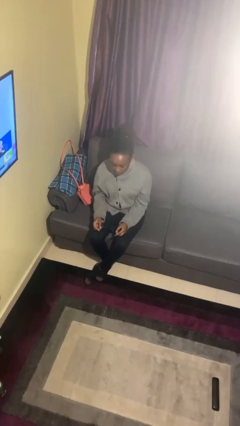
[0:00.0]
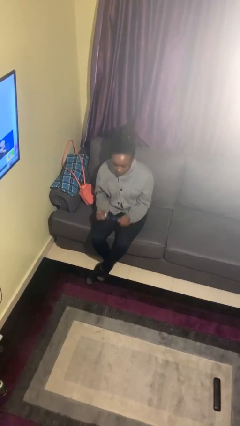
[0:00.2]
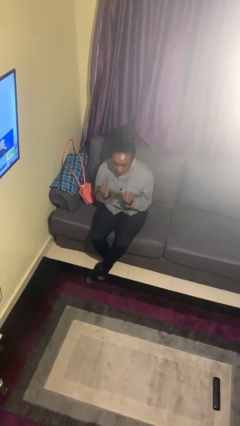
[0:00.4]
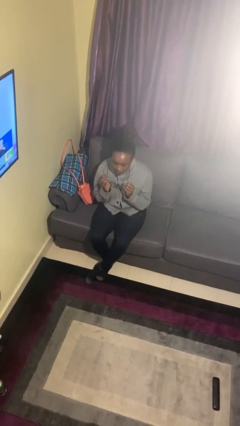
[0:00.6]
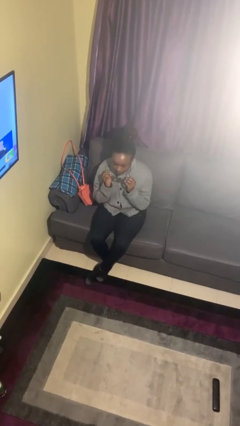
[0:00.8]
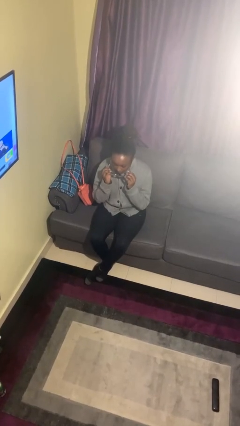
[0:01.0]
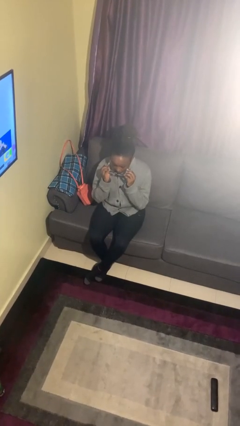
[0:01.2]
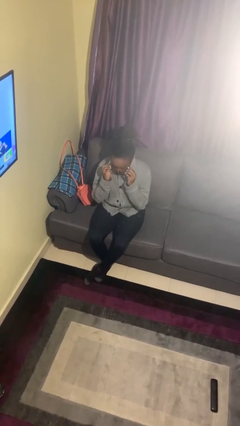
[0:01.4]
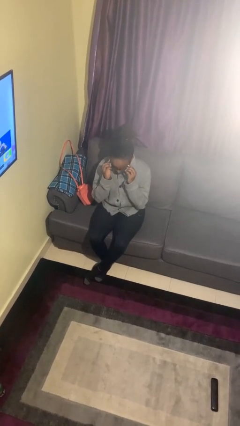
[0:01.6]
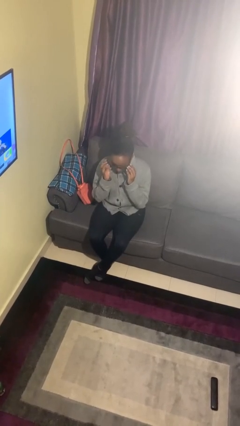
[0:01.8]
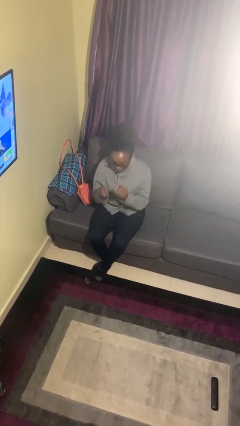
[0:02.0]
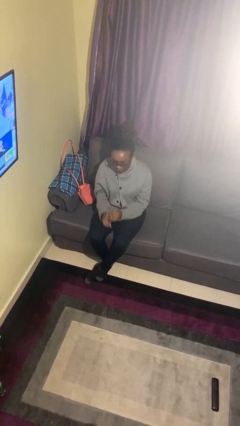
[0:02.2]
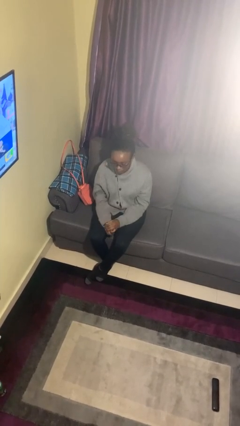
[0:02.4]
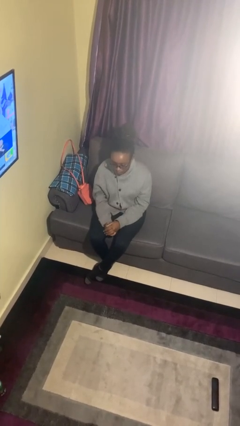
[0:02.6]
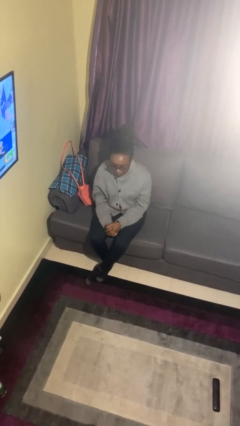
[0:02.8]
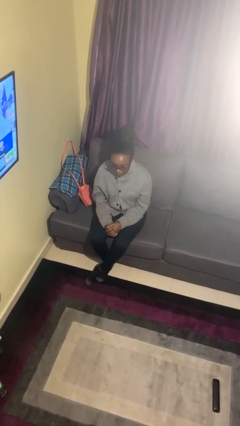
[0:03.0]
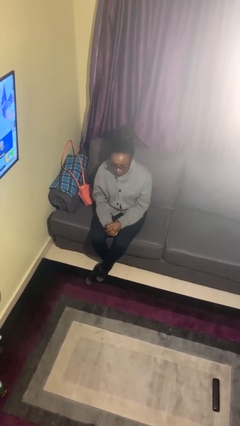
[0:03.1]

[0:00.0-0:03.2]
person puts on glasses

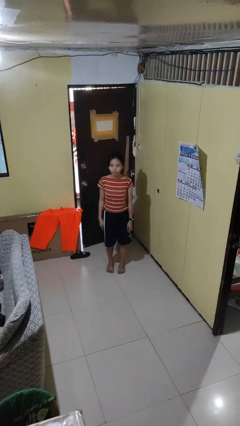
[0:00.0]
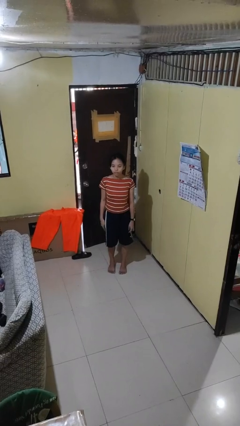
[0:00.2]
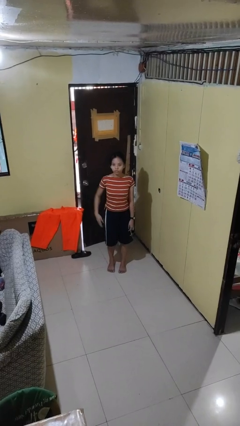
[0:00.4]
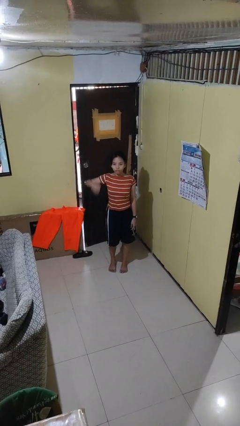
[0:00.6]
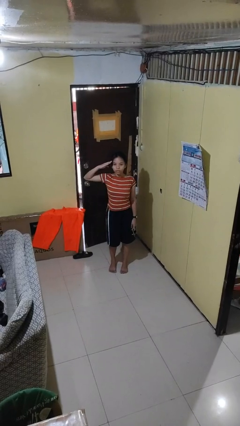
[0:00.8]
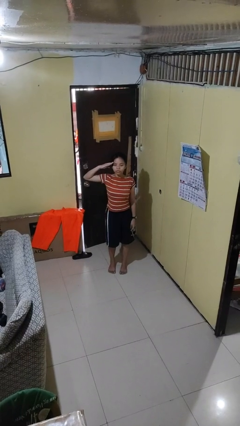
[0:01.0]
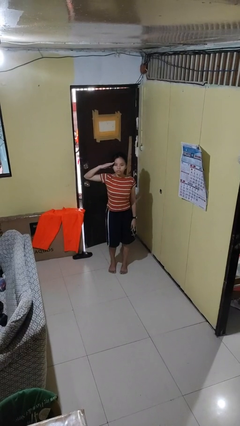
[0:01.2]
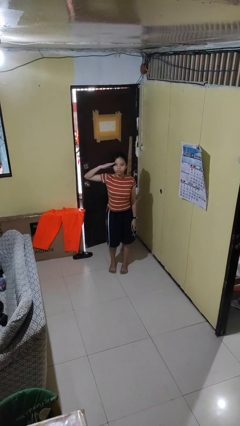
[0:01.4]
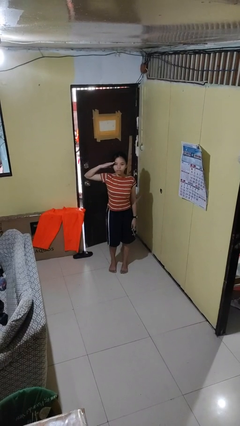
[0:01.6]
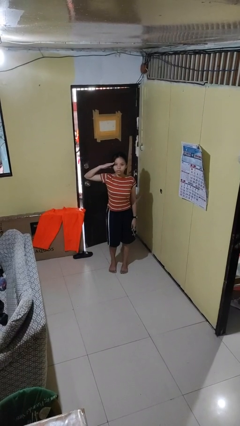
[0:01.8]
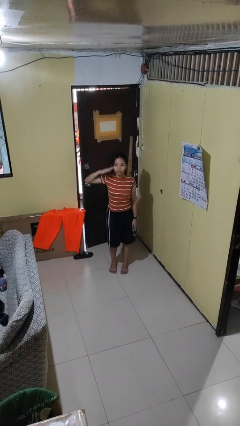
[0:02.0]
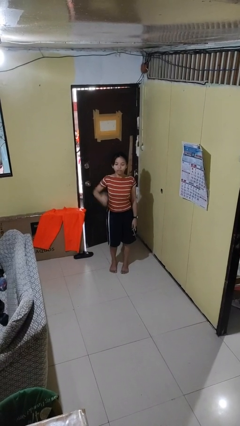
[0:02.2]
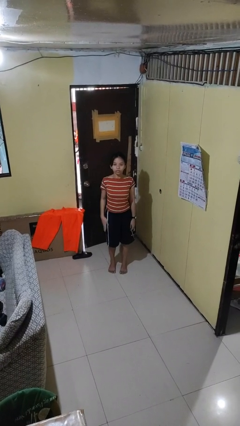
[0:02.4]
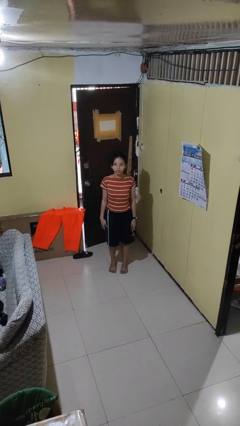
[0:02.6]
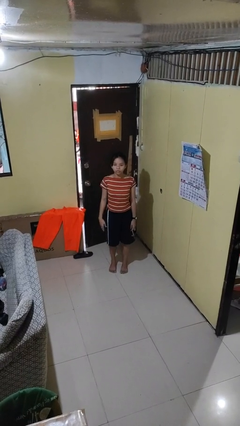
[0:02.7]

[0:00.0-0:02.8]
person salutes

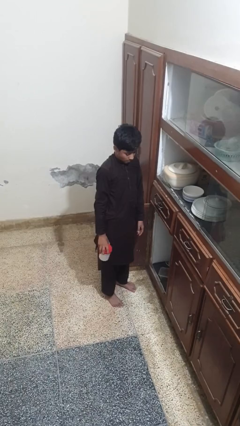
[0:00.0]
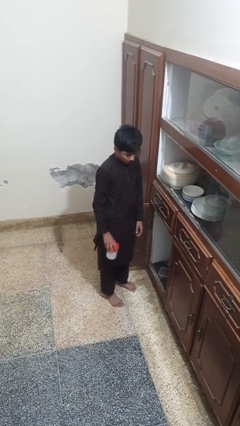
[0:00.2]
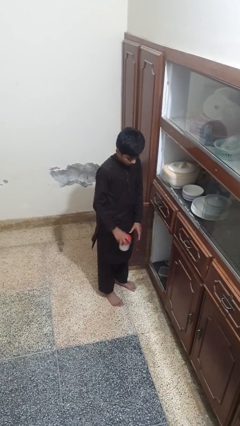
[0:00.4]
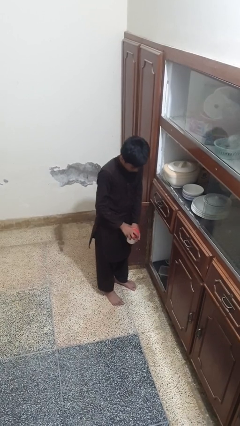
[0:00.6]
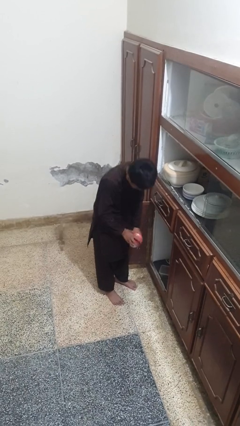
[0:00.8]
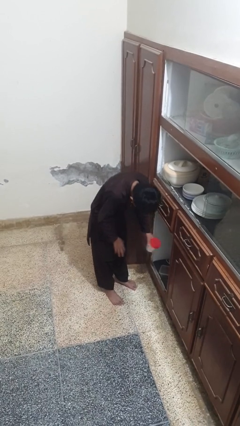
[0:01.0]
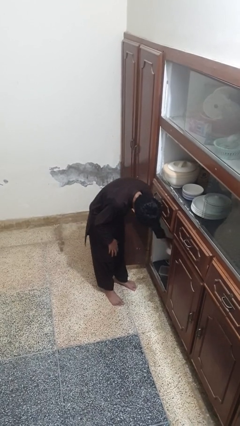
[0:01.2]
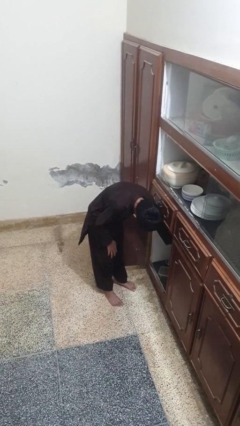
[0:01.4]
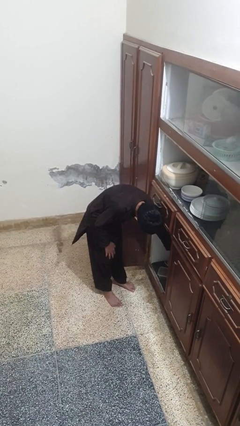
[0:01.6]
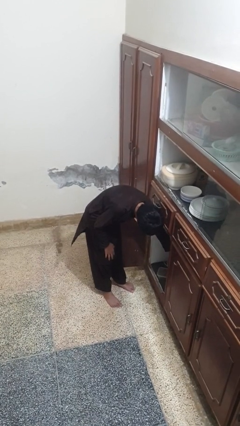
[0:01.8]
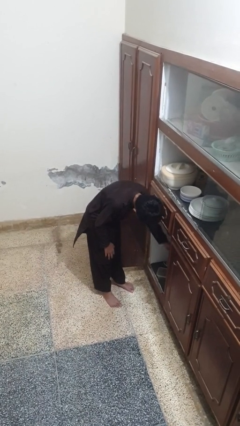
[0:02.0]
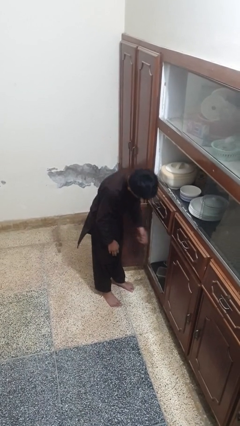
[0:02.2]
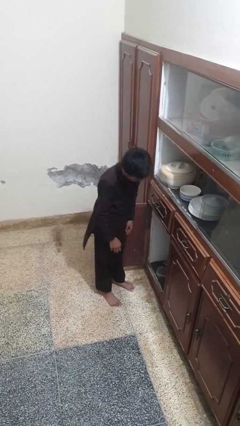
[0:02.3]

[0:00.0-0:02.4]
person puts object in cabinet

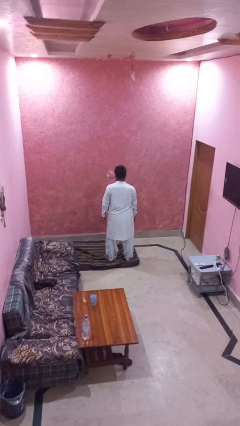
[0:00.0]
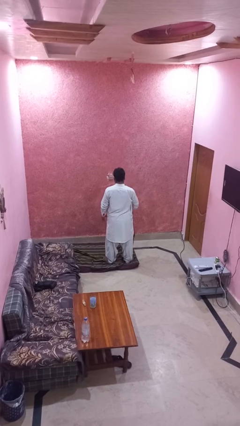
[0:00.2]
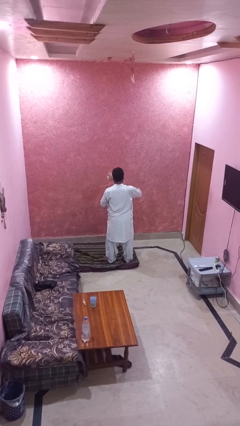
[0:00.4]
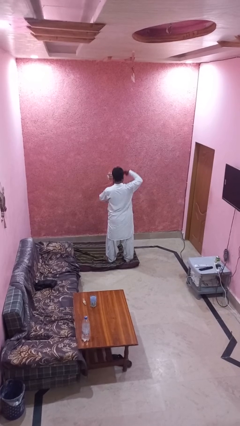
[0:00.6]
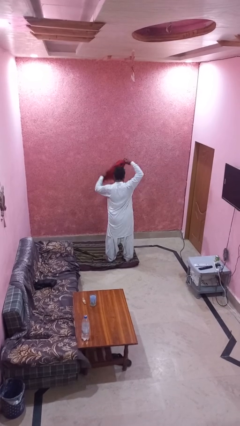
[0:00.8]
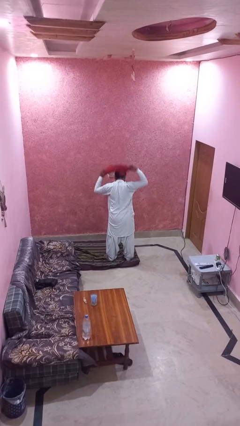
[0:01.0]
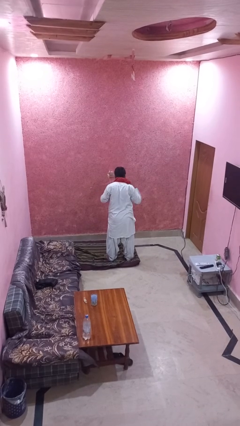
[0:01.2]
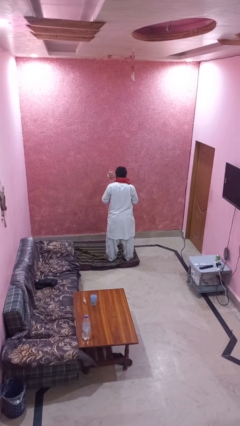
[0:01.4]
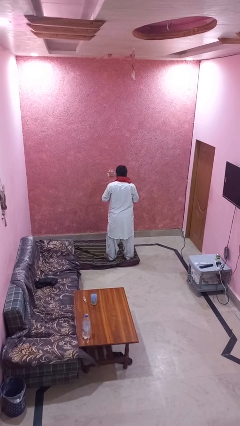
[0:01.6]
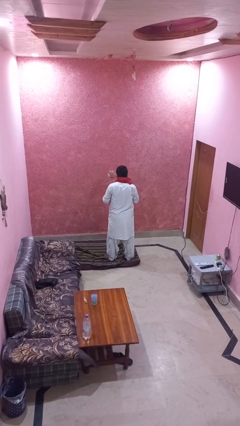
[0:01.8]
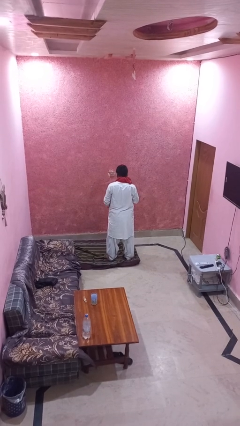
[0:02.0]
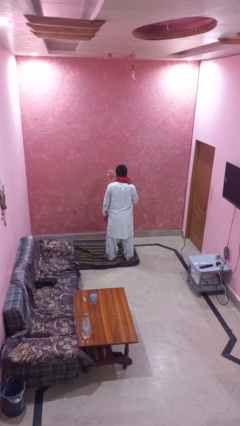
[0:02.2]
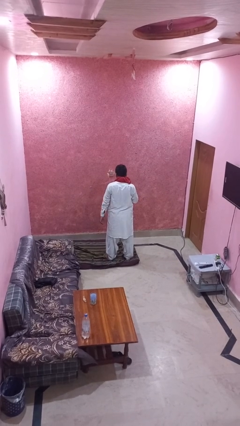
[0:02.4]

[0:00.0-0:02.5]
person puts on scarf

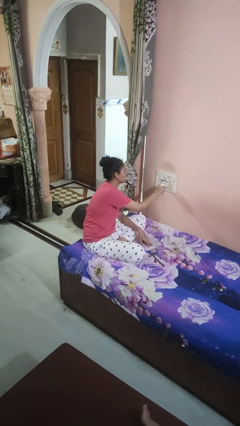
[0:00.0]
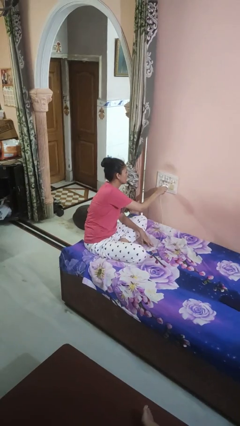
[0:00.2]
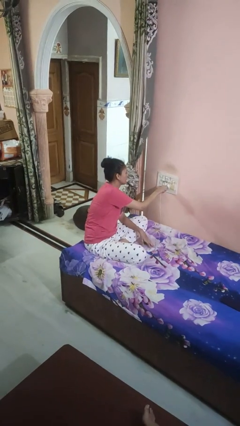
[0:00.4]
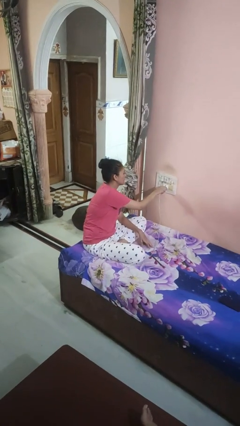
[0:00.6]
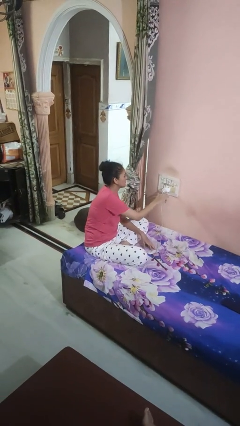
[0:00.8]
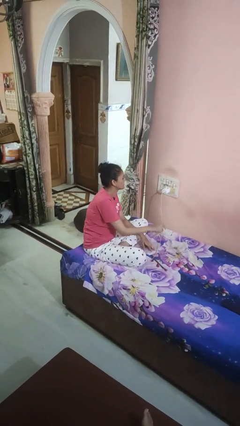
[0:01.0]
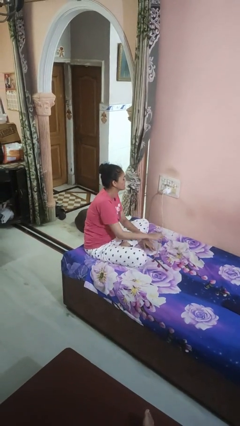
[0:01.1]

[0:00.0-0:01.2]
person plugs into electrical socket

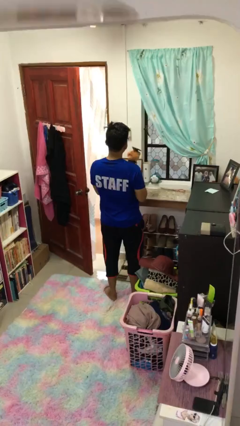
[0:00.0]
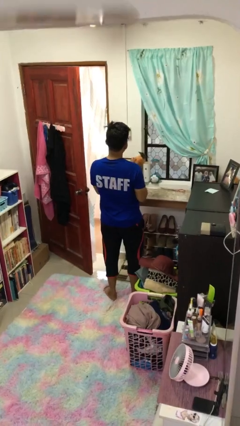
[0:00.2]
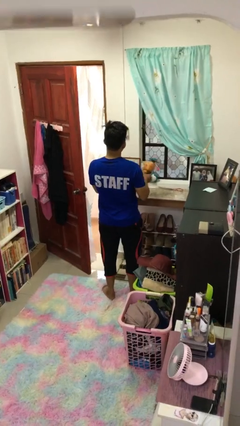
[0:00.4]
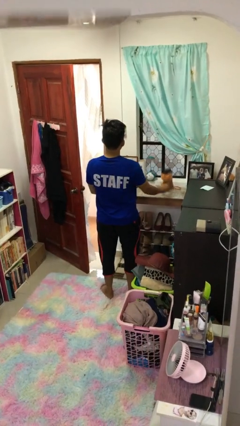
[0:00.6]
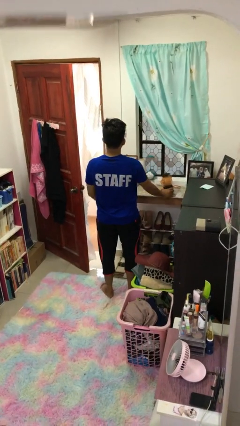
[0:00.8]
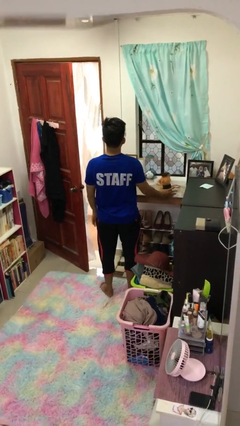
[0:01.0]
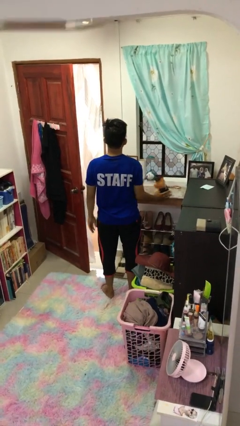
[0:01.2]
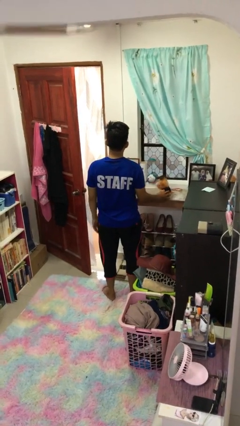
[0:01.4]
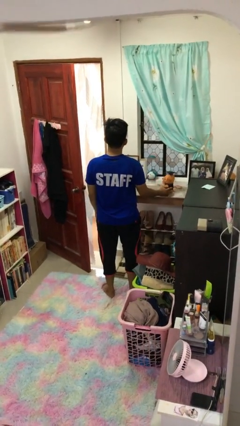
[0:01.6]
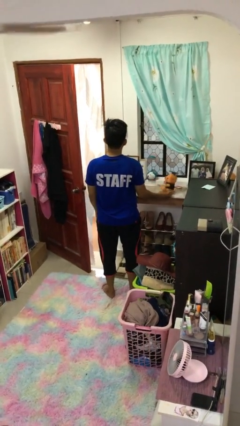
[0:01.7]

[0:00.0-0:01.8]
person puts down object on countertop

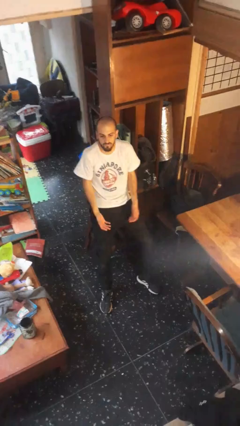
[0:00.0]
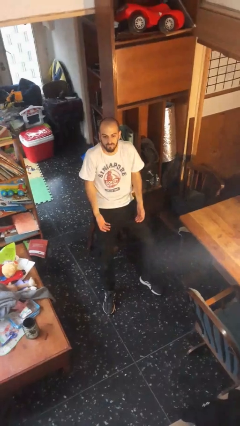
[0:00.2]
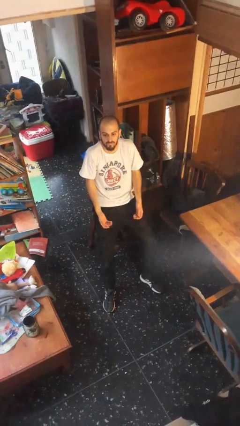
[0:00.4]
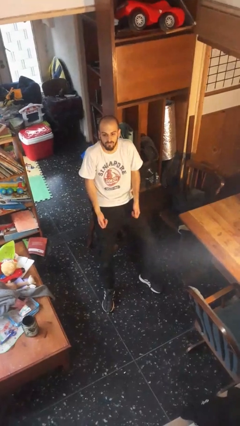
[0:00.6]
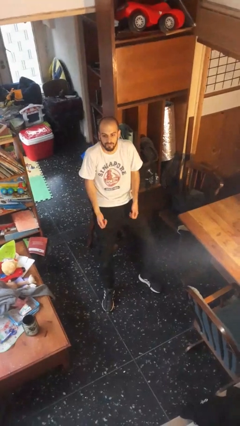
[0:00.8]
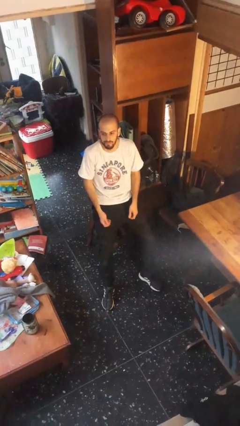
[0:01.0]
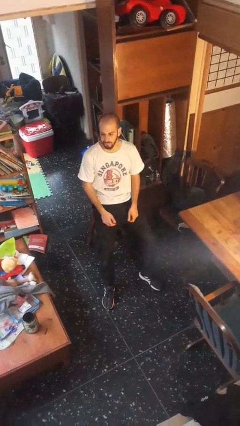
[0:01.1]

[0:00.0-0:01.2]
person shrugs

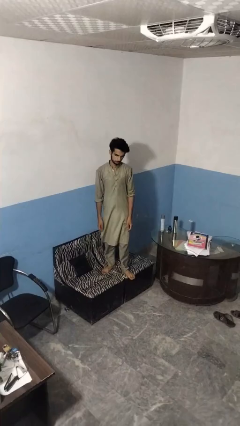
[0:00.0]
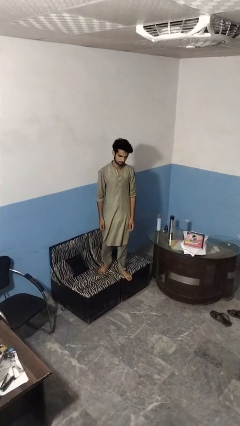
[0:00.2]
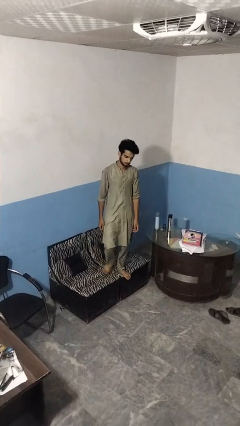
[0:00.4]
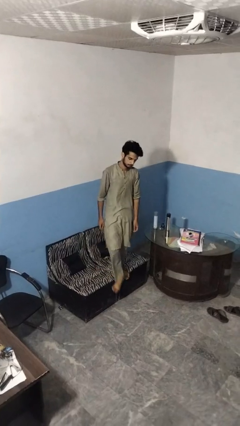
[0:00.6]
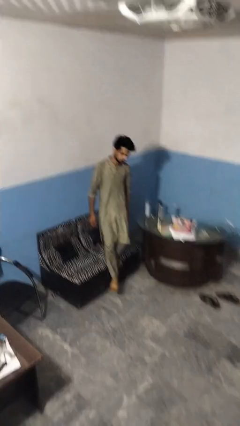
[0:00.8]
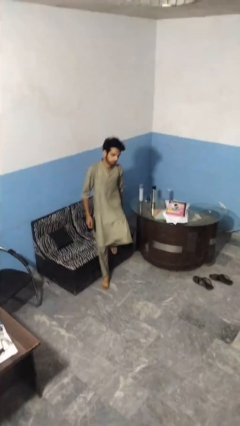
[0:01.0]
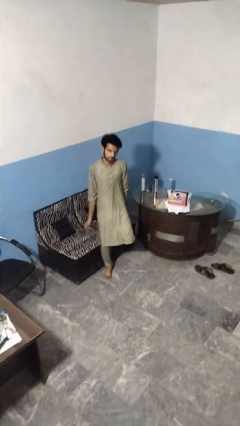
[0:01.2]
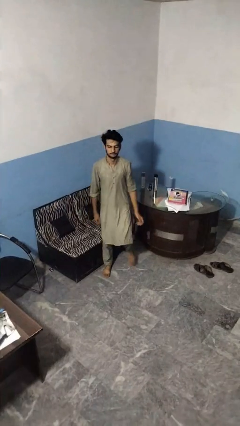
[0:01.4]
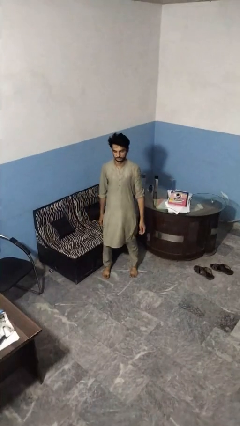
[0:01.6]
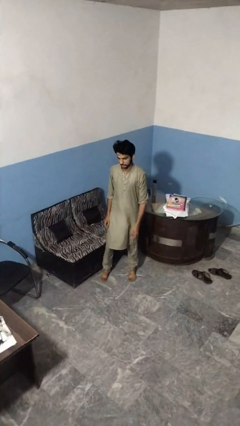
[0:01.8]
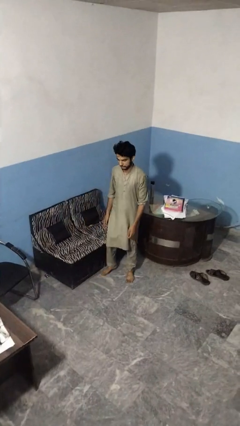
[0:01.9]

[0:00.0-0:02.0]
person climbs off couch

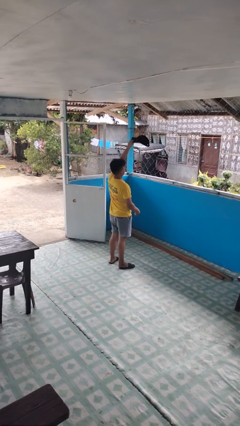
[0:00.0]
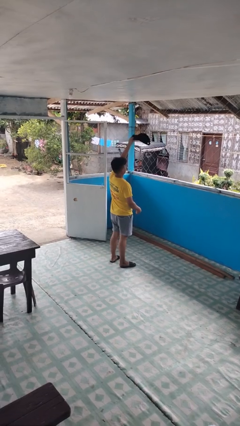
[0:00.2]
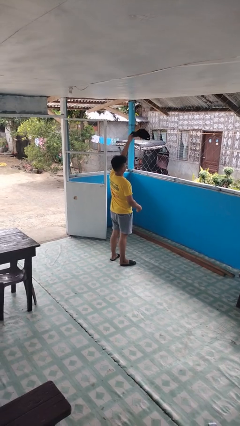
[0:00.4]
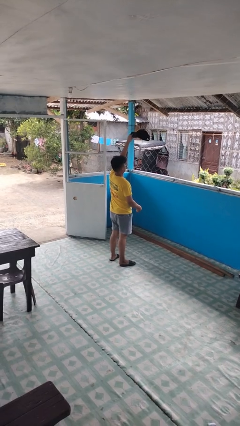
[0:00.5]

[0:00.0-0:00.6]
person drops object
